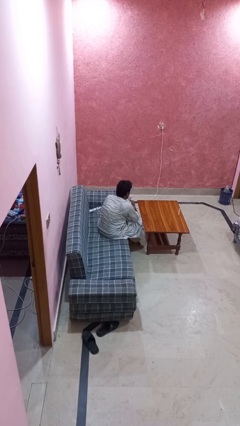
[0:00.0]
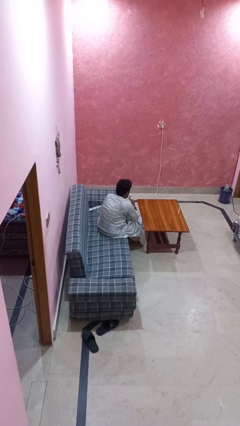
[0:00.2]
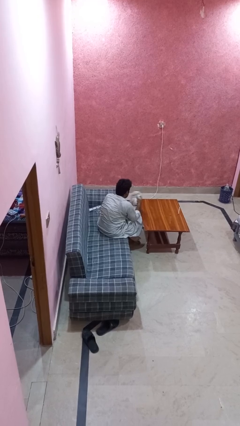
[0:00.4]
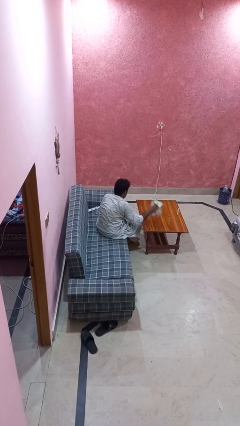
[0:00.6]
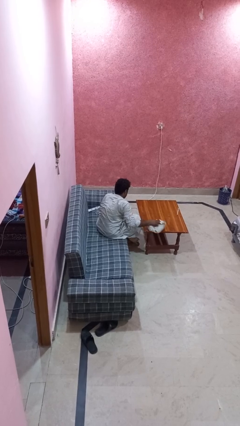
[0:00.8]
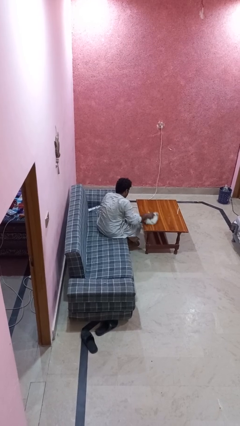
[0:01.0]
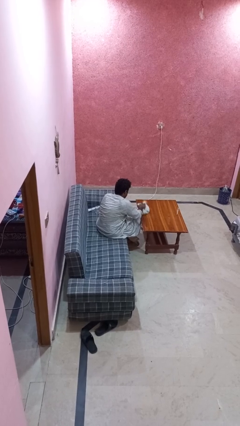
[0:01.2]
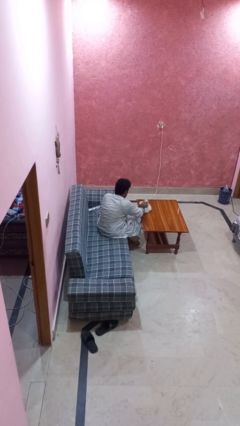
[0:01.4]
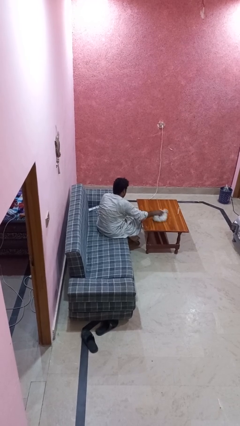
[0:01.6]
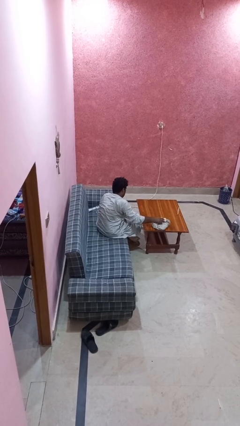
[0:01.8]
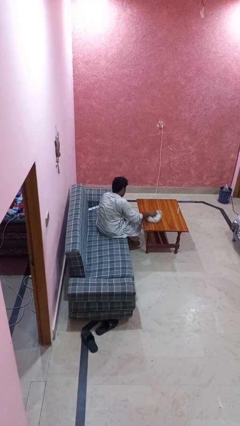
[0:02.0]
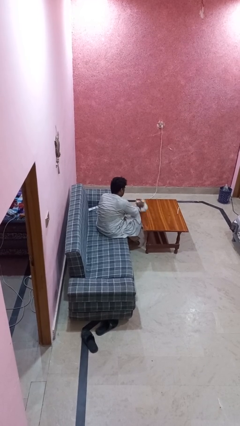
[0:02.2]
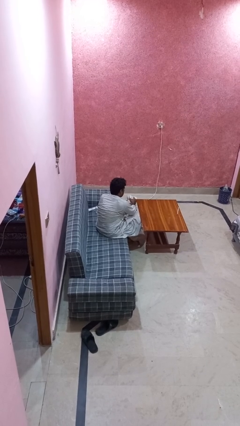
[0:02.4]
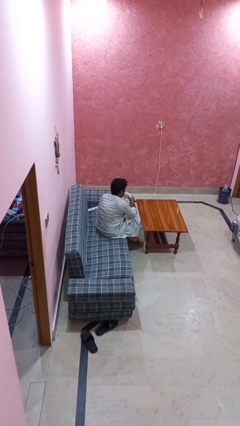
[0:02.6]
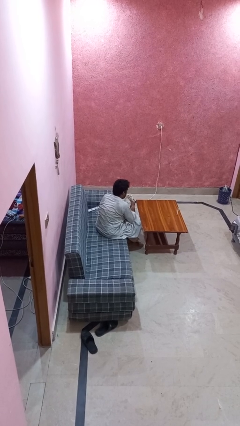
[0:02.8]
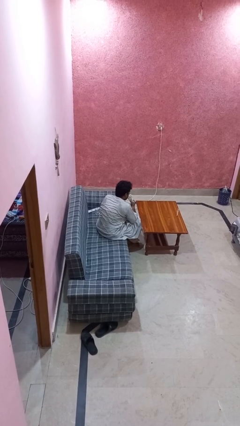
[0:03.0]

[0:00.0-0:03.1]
person cleans table with rag

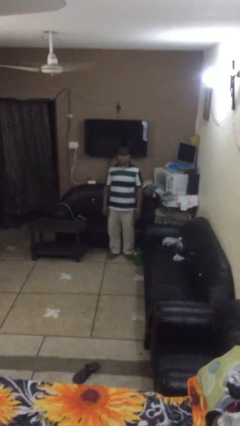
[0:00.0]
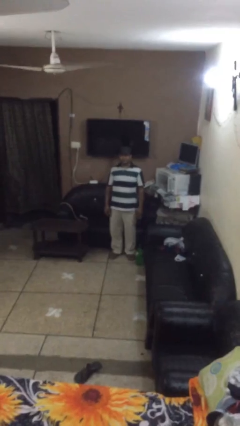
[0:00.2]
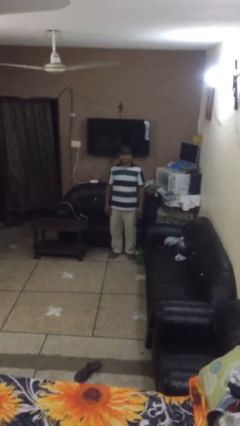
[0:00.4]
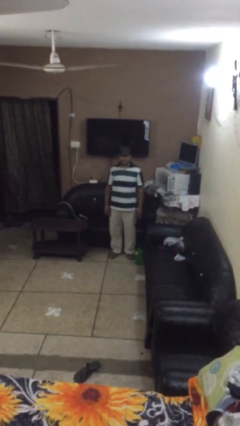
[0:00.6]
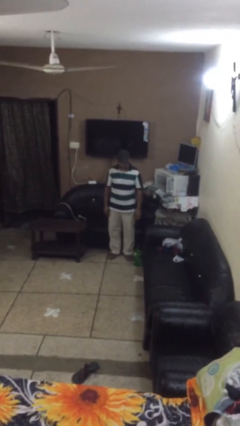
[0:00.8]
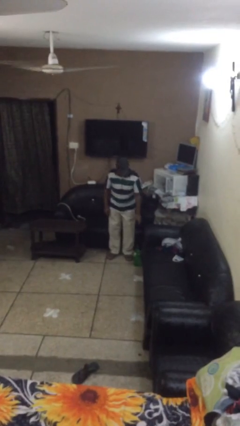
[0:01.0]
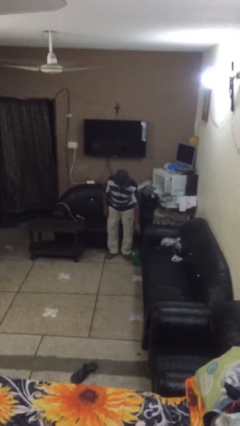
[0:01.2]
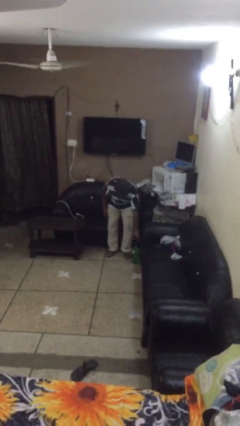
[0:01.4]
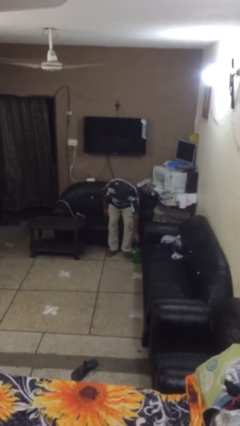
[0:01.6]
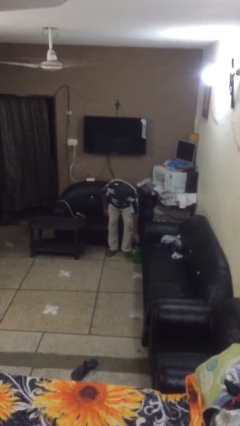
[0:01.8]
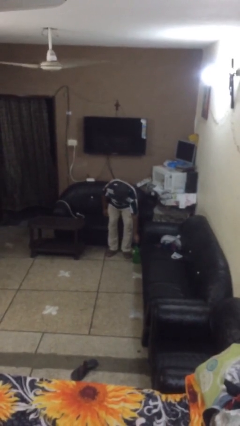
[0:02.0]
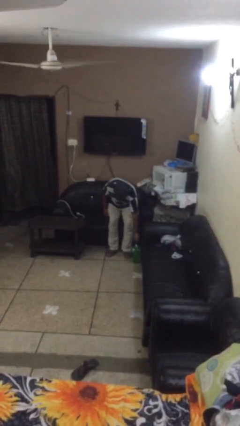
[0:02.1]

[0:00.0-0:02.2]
person picks up object from floor

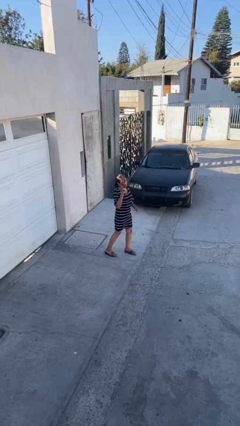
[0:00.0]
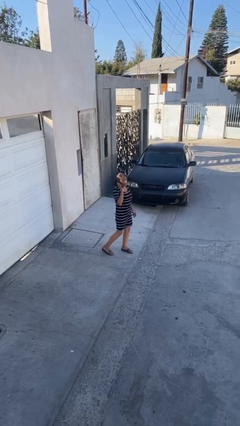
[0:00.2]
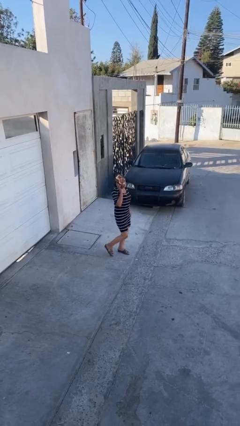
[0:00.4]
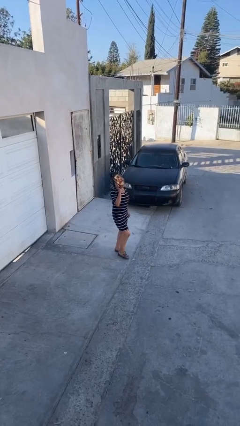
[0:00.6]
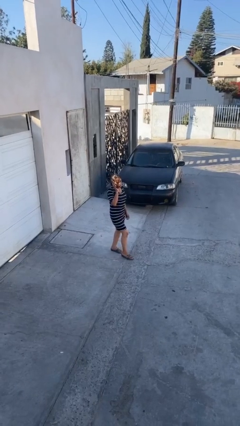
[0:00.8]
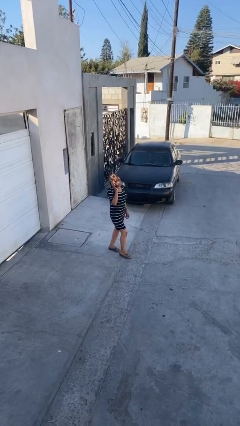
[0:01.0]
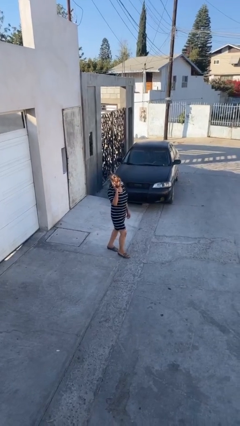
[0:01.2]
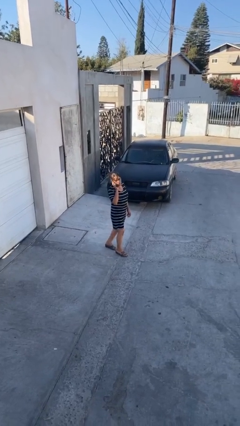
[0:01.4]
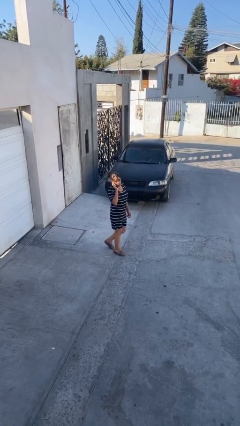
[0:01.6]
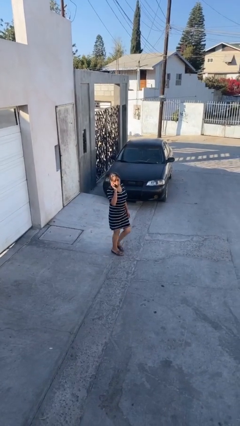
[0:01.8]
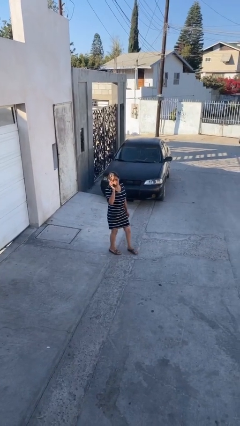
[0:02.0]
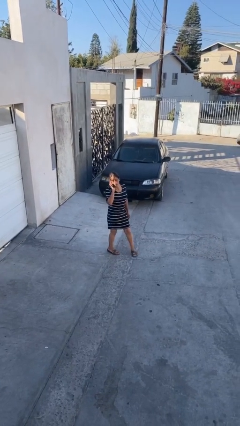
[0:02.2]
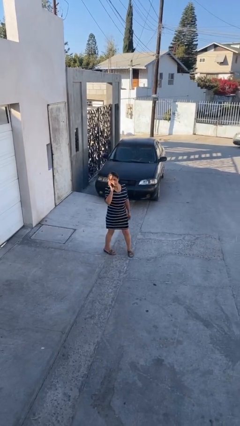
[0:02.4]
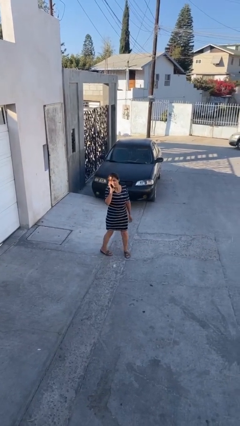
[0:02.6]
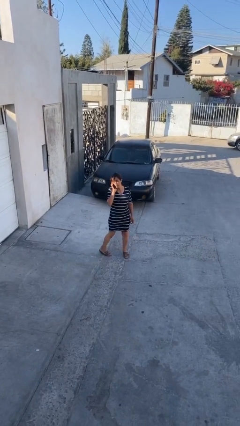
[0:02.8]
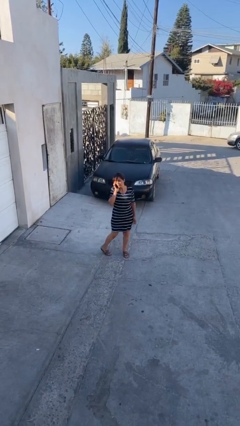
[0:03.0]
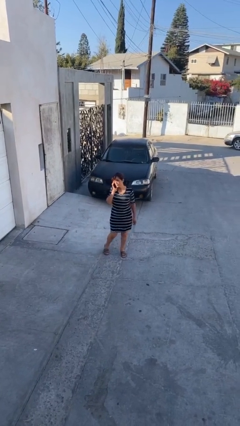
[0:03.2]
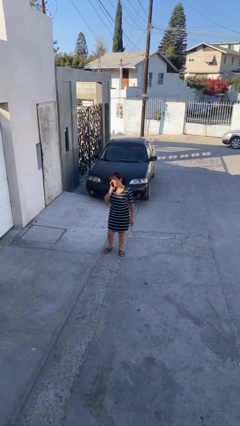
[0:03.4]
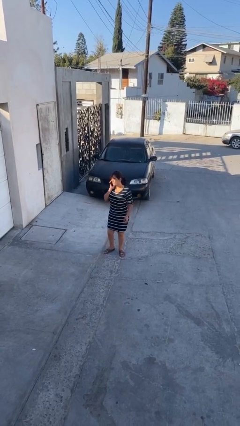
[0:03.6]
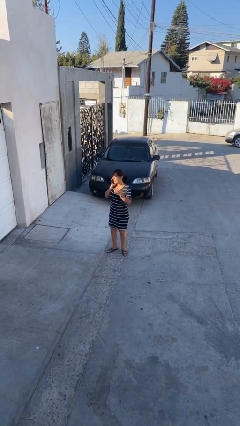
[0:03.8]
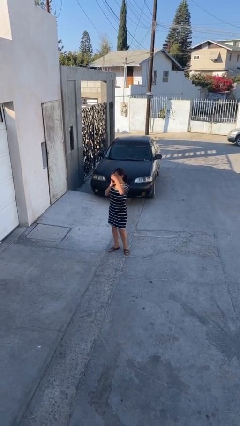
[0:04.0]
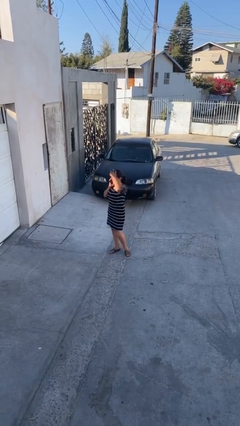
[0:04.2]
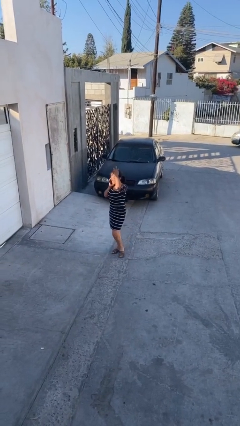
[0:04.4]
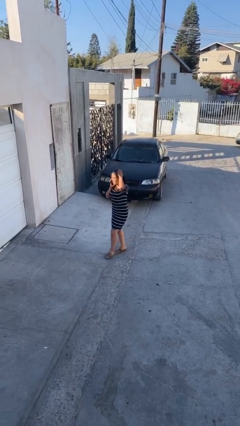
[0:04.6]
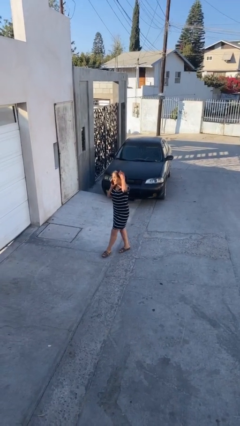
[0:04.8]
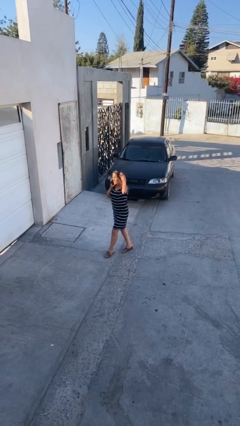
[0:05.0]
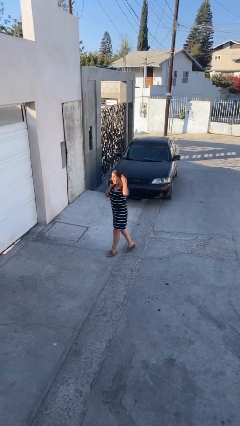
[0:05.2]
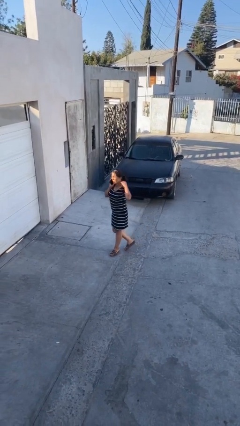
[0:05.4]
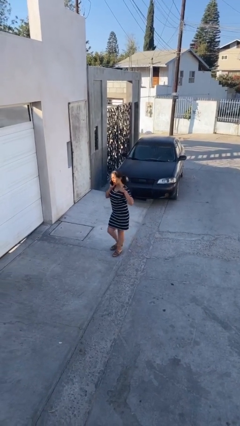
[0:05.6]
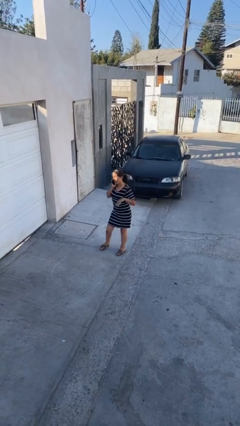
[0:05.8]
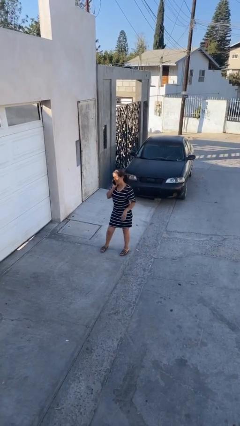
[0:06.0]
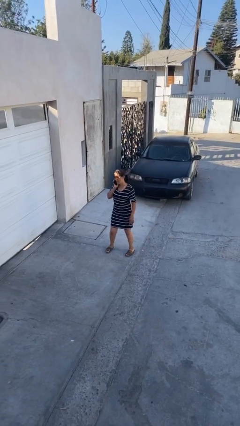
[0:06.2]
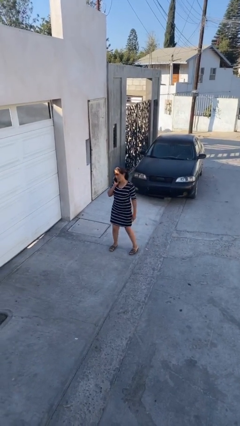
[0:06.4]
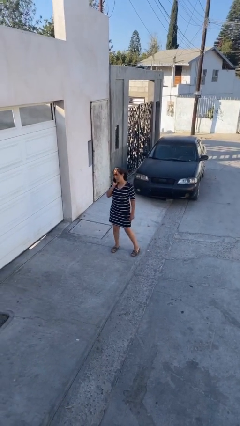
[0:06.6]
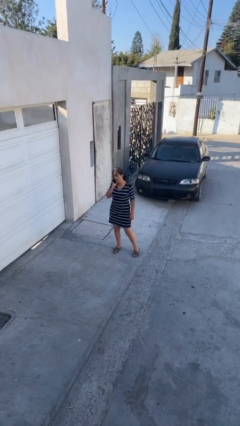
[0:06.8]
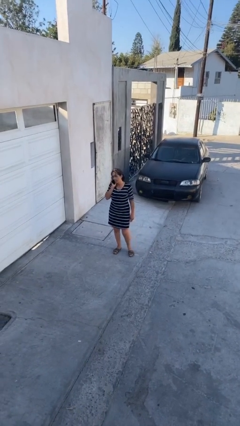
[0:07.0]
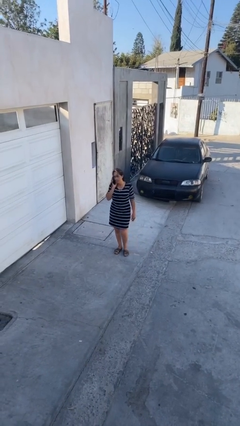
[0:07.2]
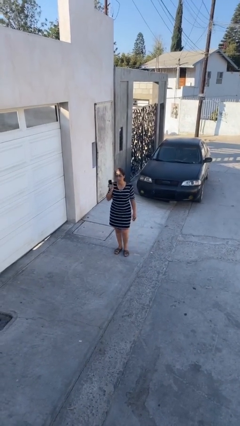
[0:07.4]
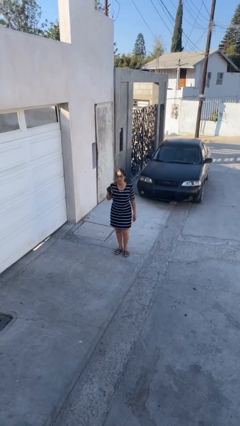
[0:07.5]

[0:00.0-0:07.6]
person talks on phone

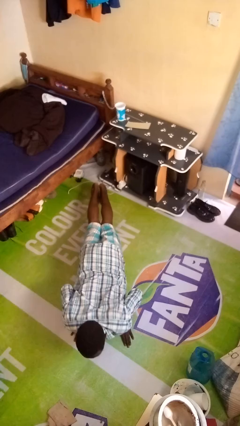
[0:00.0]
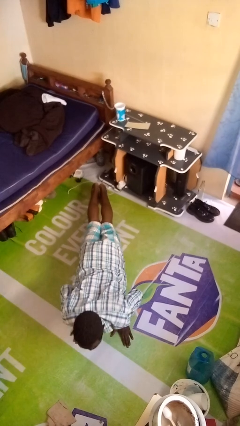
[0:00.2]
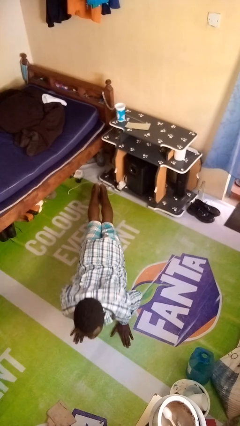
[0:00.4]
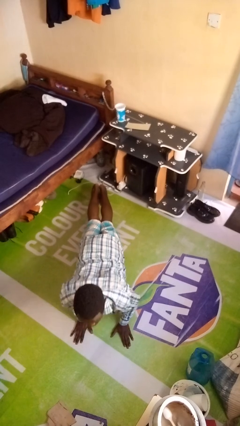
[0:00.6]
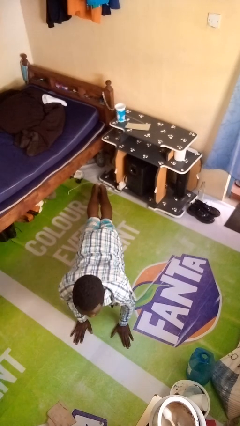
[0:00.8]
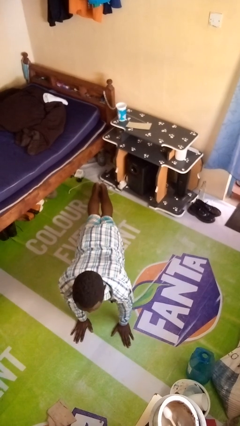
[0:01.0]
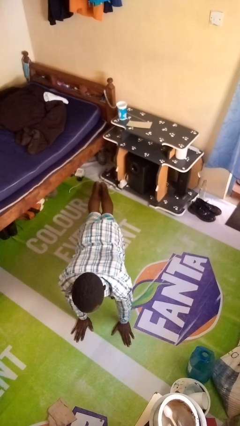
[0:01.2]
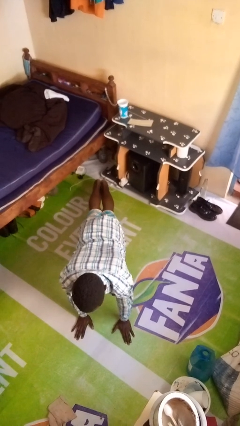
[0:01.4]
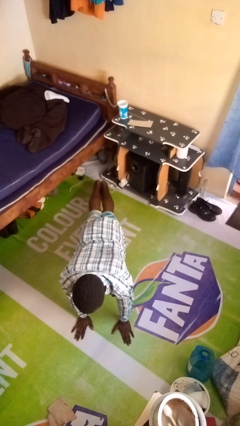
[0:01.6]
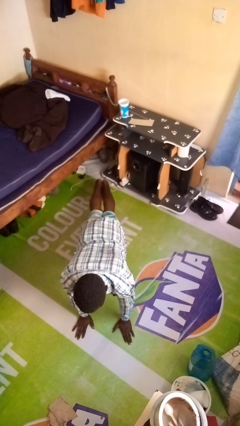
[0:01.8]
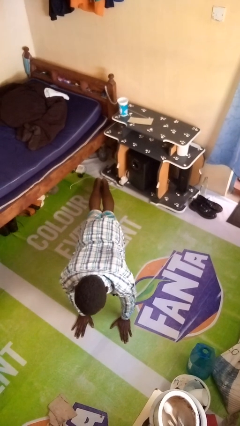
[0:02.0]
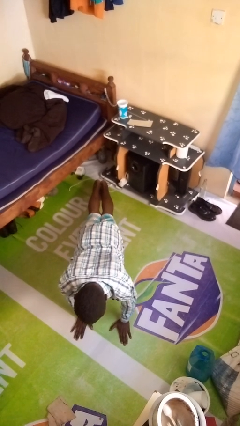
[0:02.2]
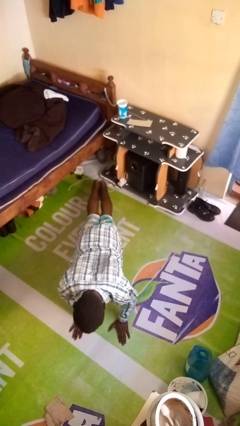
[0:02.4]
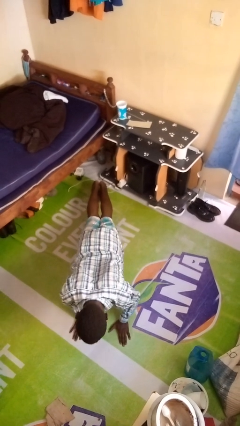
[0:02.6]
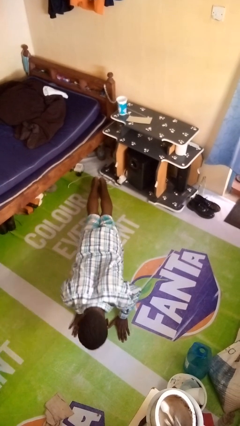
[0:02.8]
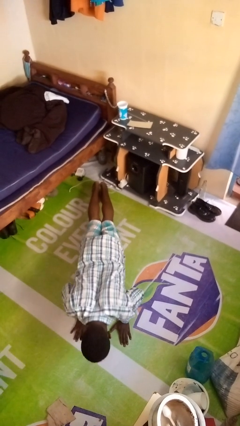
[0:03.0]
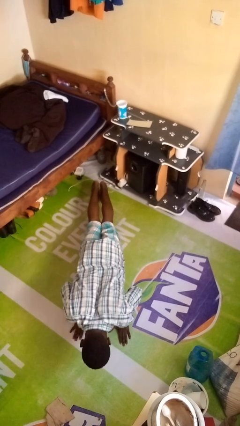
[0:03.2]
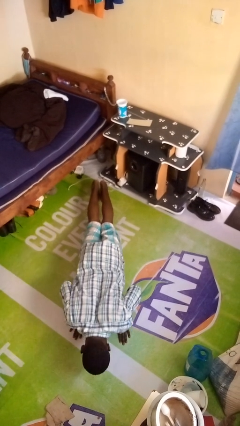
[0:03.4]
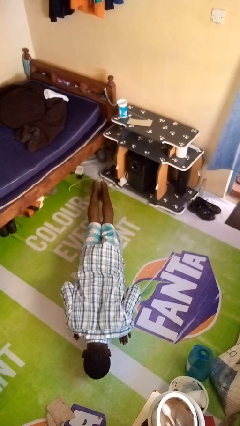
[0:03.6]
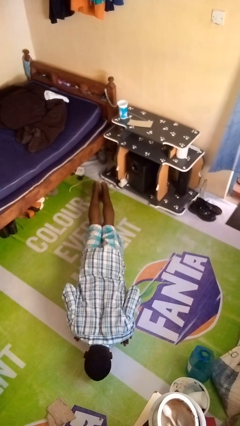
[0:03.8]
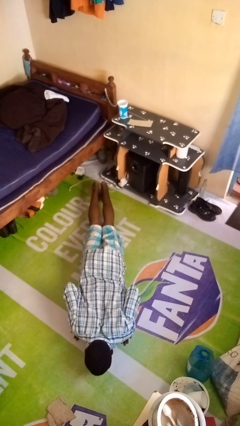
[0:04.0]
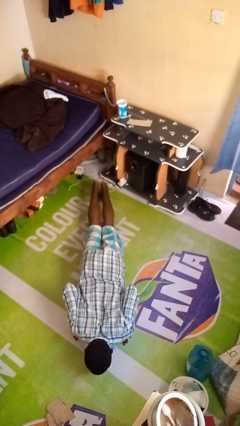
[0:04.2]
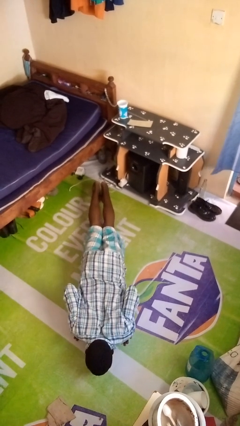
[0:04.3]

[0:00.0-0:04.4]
person exercises with pushup

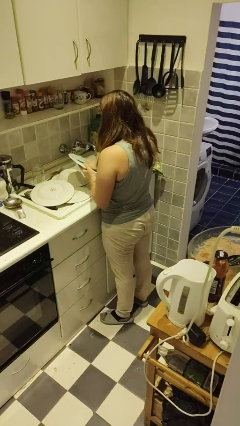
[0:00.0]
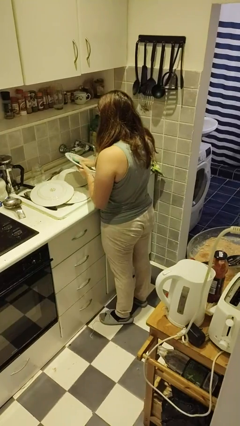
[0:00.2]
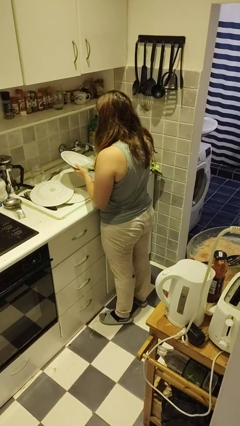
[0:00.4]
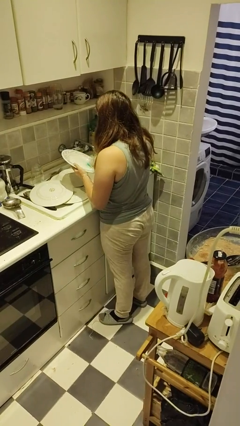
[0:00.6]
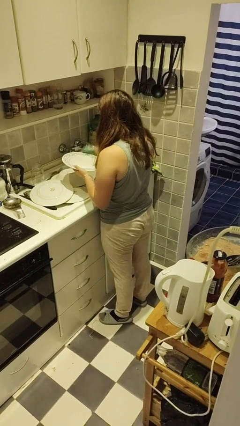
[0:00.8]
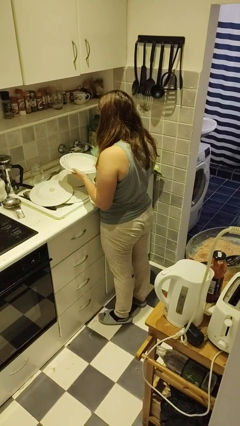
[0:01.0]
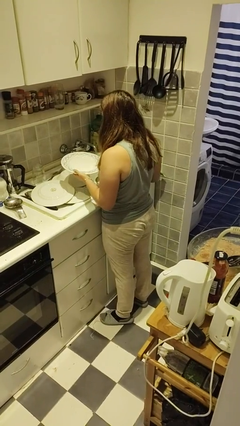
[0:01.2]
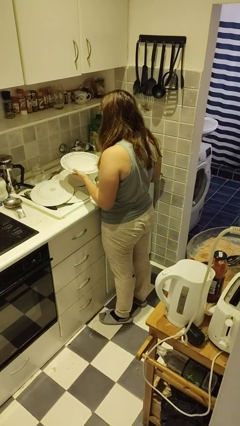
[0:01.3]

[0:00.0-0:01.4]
person dries dish
